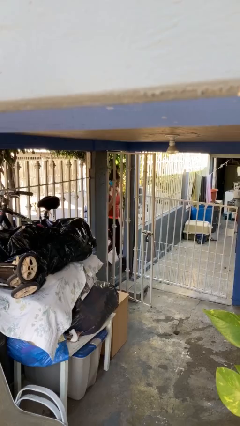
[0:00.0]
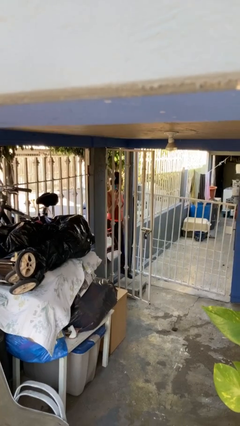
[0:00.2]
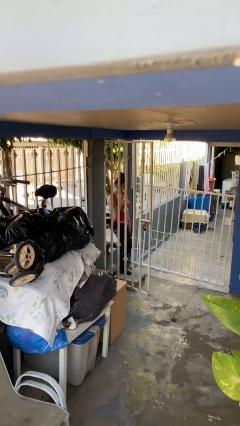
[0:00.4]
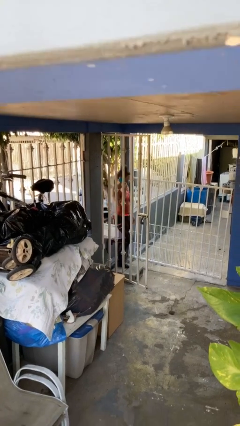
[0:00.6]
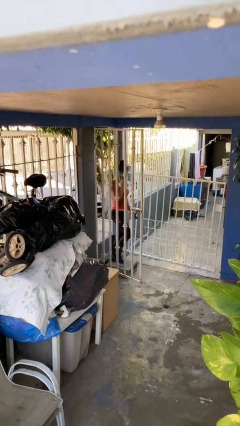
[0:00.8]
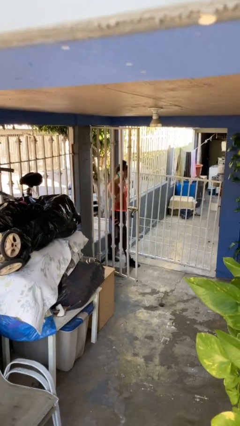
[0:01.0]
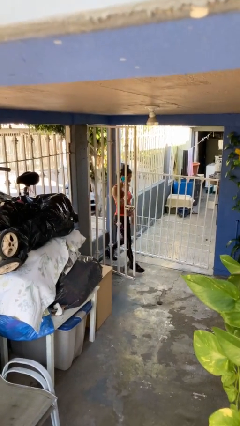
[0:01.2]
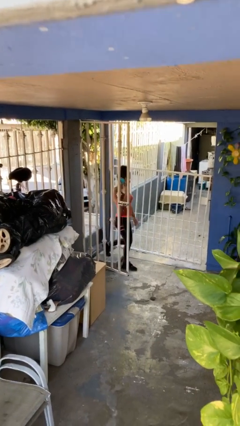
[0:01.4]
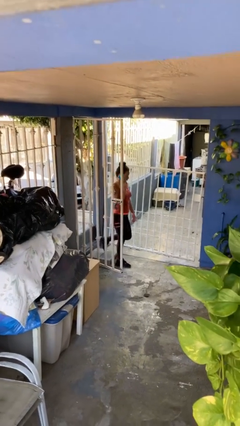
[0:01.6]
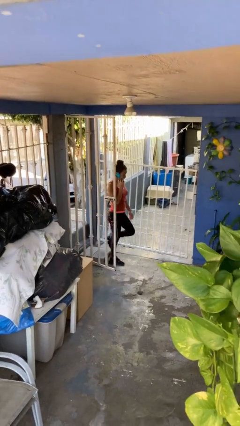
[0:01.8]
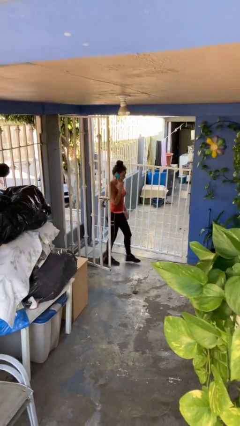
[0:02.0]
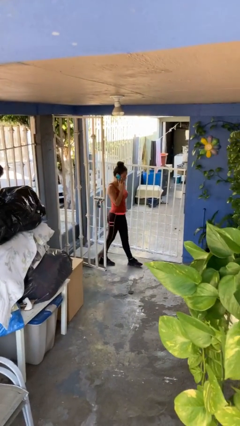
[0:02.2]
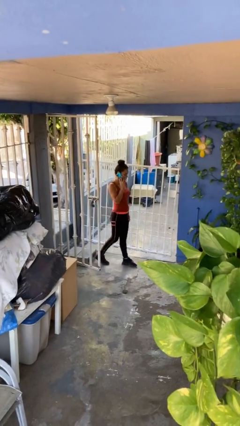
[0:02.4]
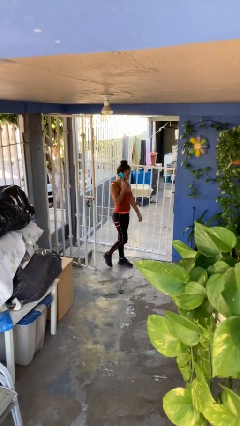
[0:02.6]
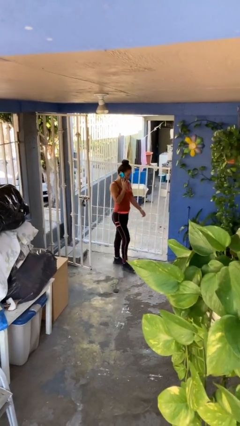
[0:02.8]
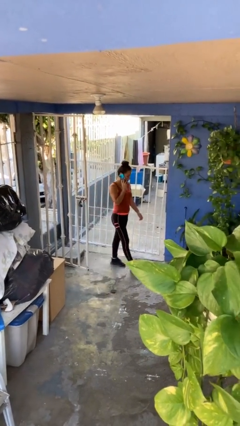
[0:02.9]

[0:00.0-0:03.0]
person enters scene through structure

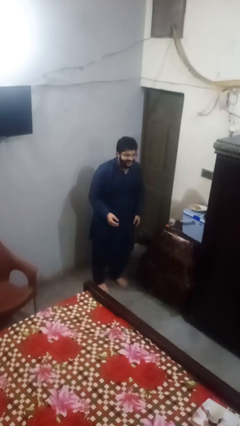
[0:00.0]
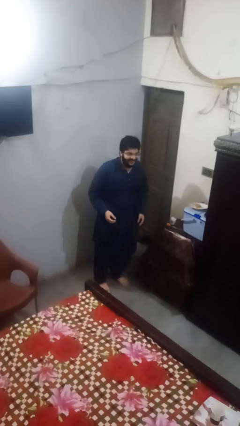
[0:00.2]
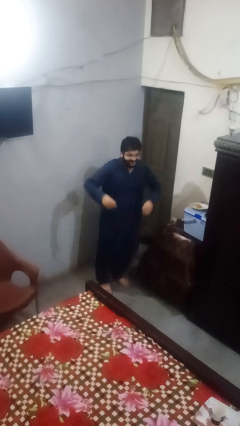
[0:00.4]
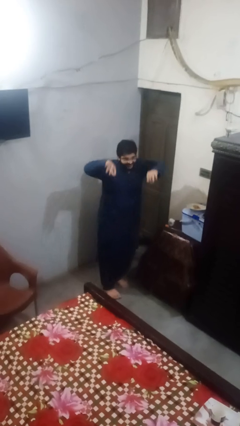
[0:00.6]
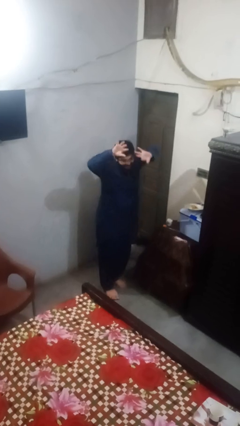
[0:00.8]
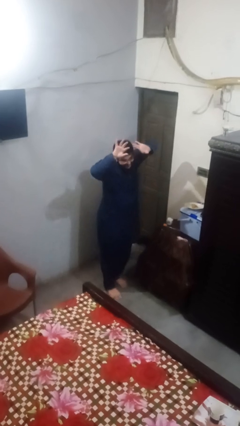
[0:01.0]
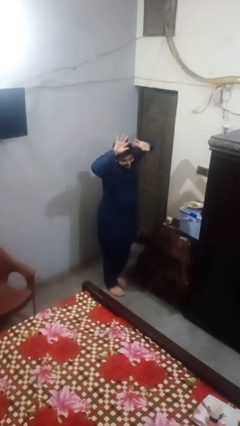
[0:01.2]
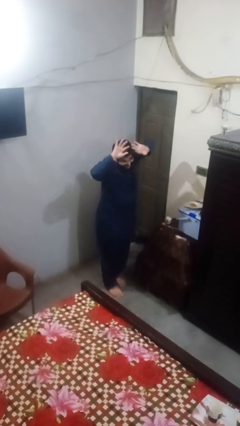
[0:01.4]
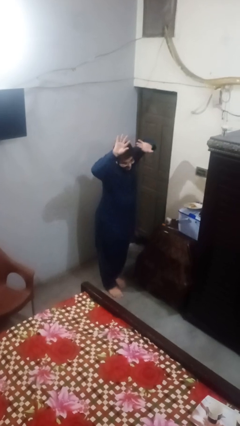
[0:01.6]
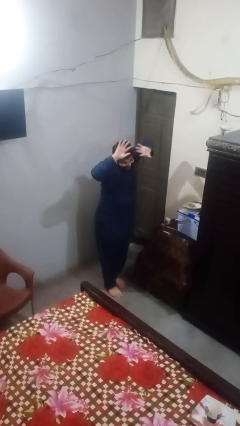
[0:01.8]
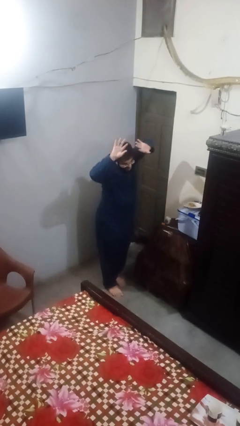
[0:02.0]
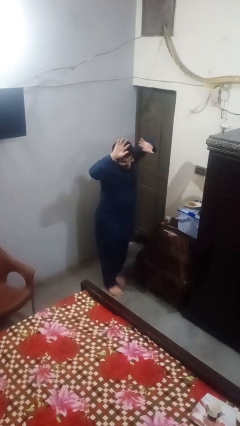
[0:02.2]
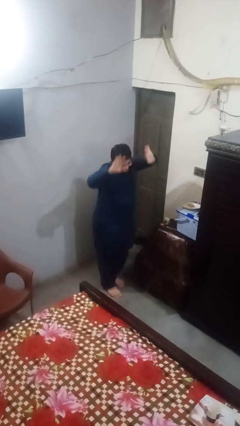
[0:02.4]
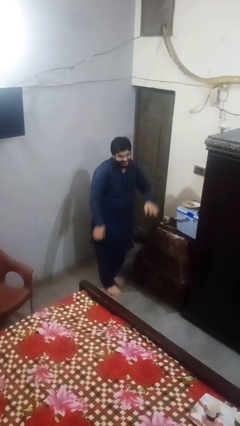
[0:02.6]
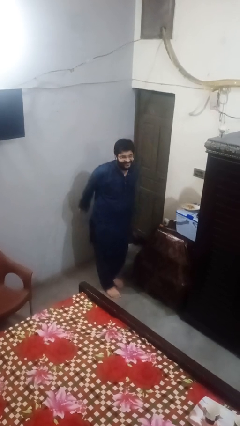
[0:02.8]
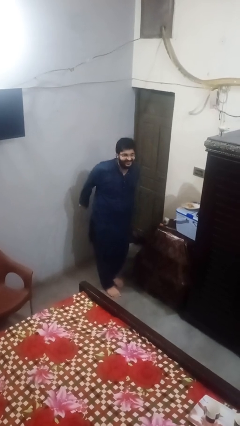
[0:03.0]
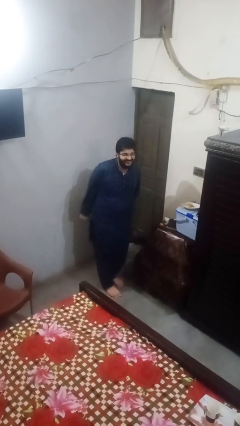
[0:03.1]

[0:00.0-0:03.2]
person dances in place

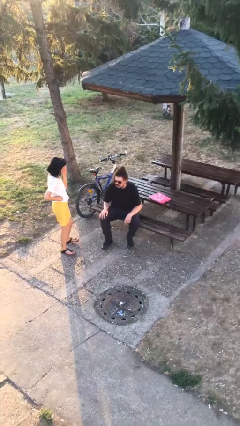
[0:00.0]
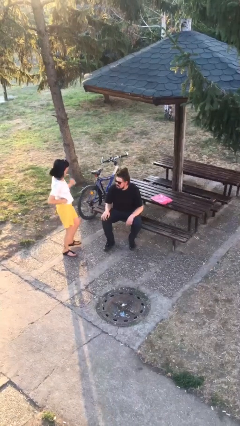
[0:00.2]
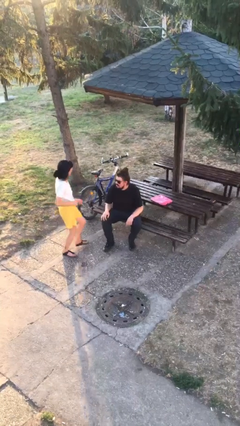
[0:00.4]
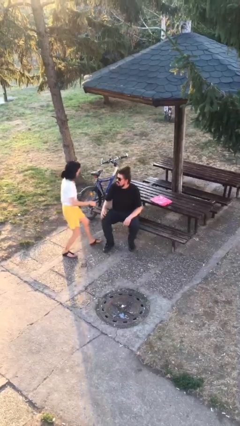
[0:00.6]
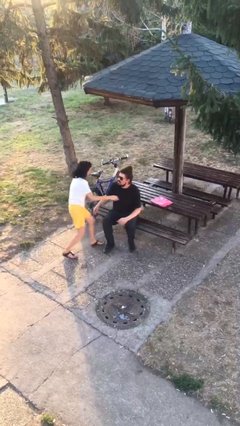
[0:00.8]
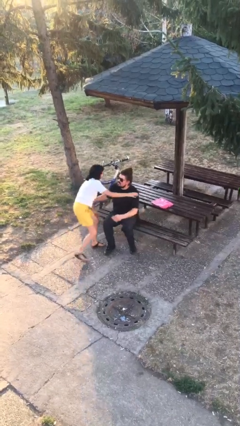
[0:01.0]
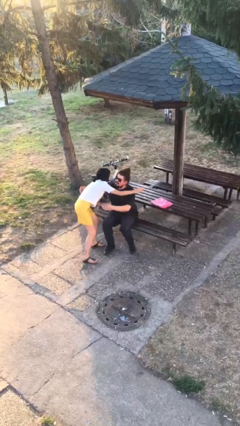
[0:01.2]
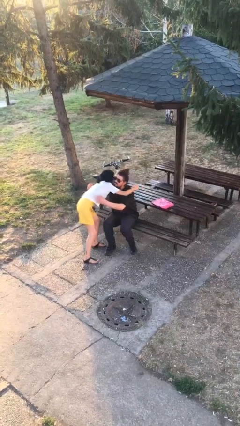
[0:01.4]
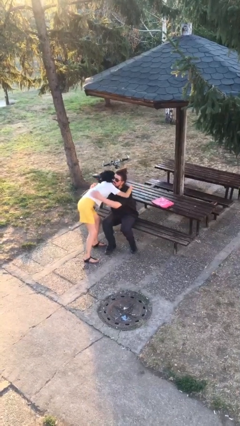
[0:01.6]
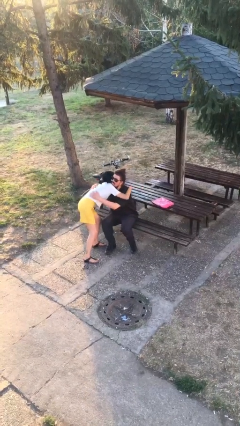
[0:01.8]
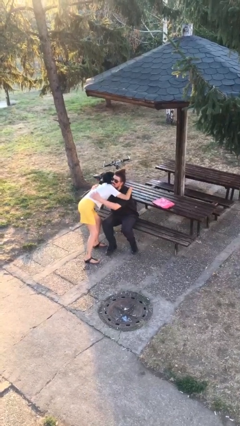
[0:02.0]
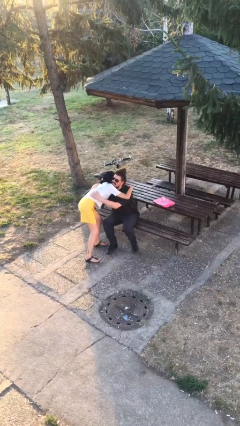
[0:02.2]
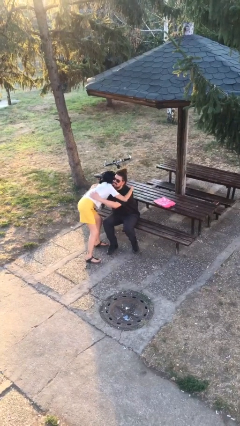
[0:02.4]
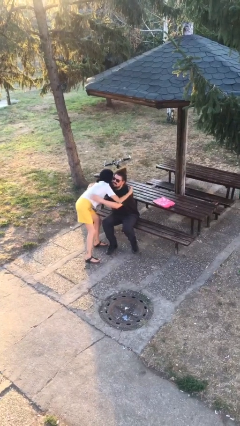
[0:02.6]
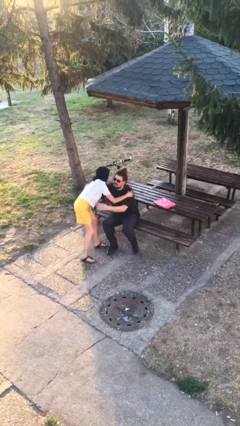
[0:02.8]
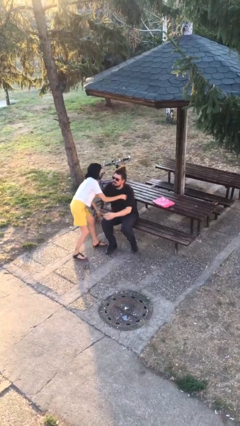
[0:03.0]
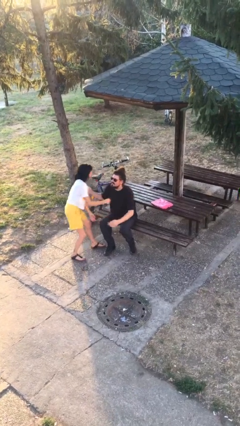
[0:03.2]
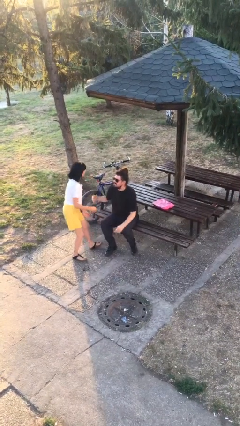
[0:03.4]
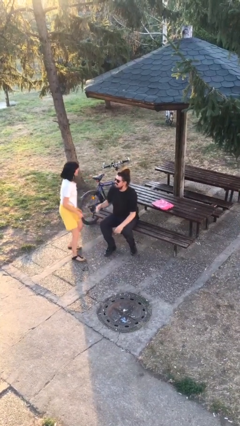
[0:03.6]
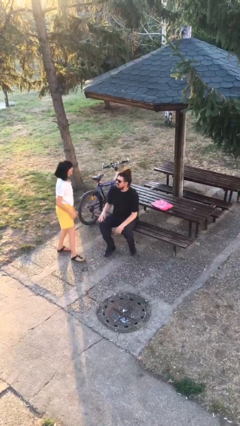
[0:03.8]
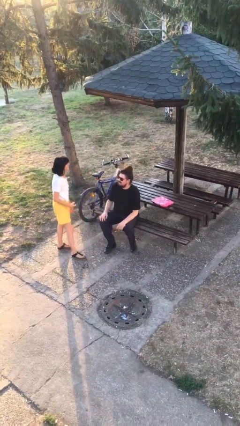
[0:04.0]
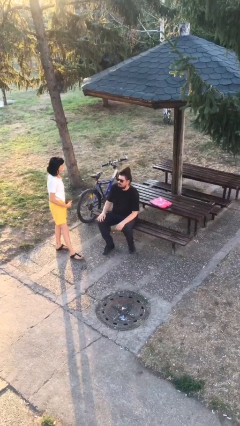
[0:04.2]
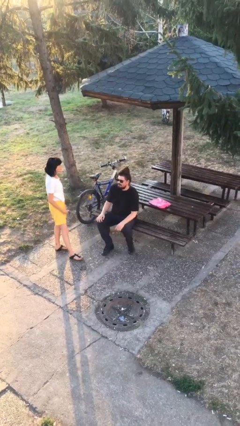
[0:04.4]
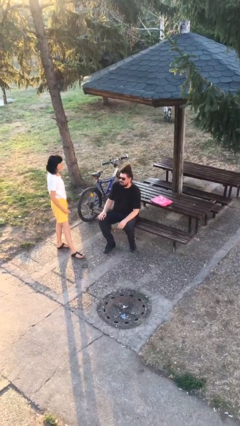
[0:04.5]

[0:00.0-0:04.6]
person embraces person

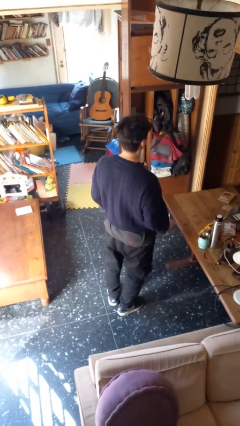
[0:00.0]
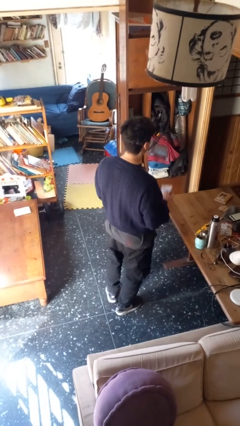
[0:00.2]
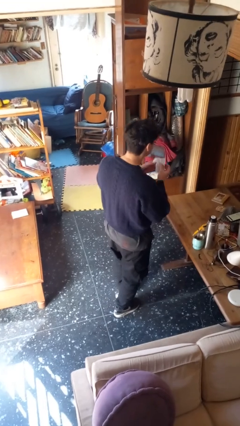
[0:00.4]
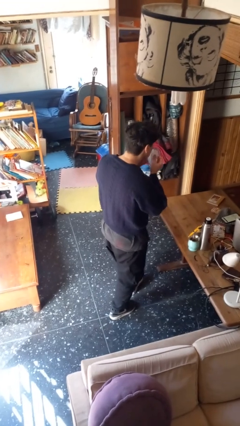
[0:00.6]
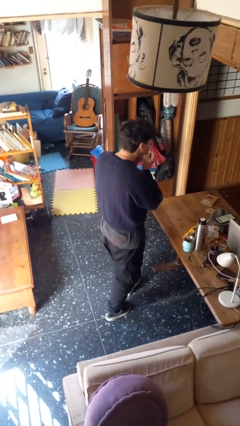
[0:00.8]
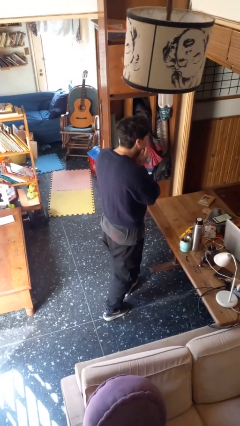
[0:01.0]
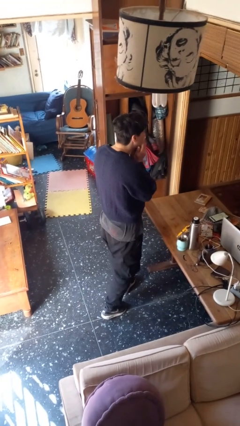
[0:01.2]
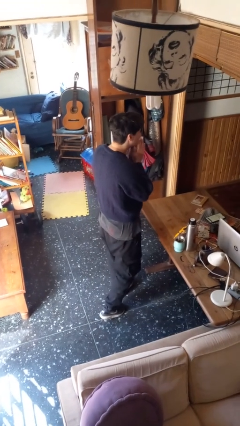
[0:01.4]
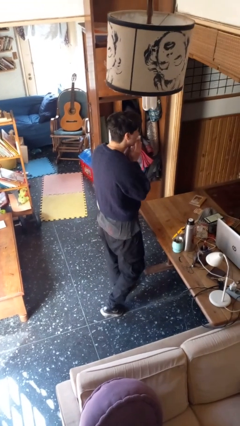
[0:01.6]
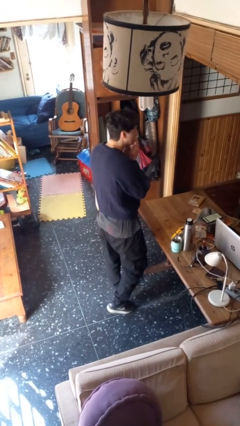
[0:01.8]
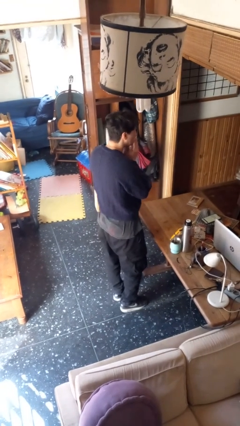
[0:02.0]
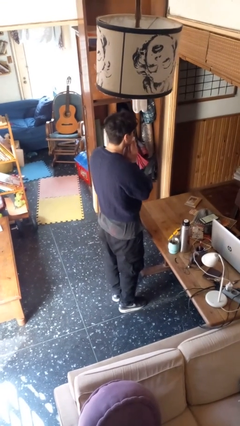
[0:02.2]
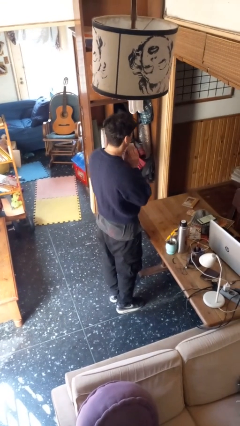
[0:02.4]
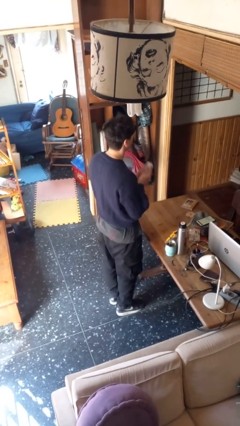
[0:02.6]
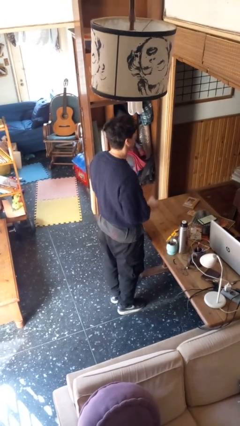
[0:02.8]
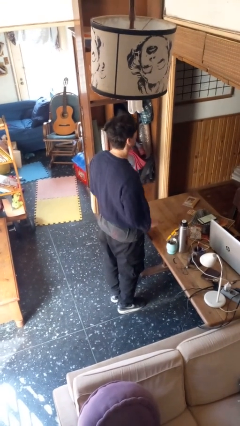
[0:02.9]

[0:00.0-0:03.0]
person wipes mouth with napkin

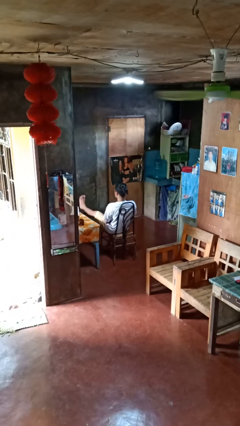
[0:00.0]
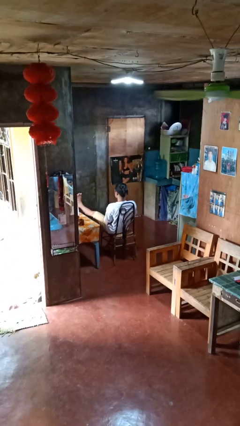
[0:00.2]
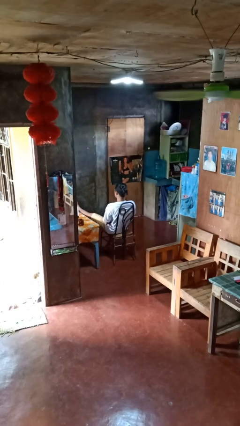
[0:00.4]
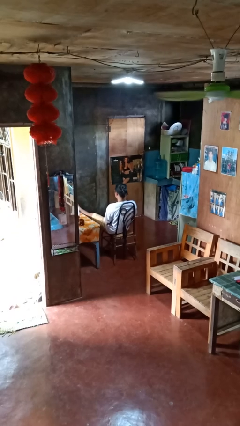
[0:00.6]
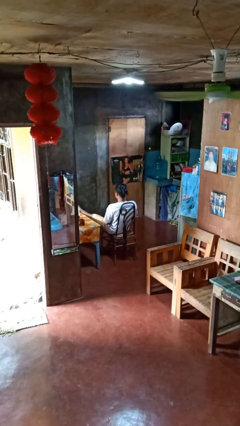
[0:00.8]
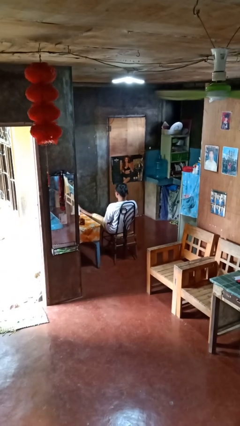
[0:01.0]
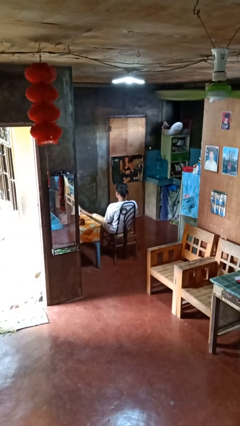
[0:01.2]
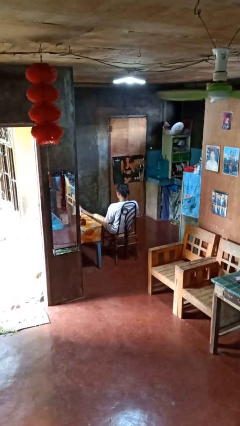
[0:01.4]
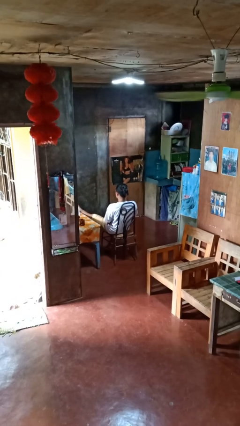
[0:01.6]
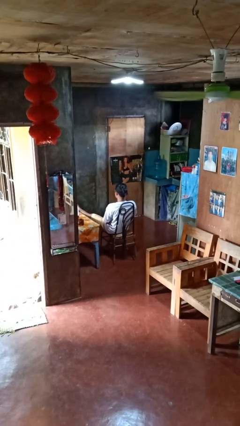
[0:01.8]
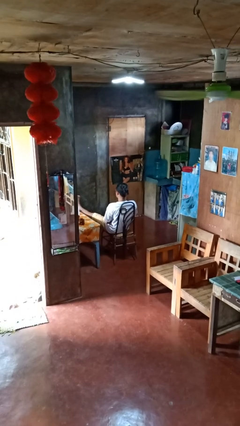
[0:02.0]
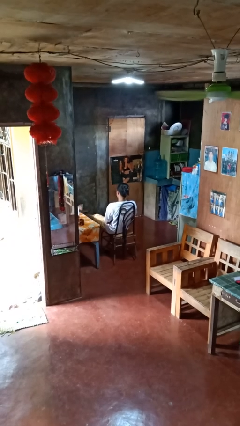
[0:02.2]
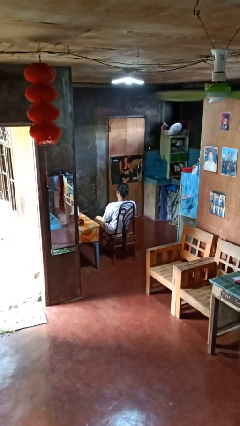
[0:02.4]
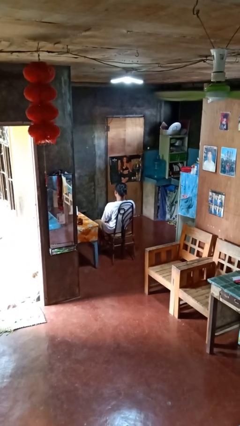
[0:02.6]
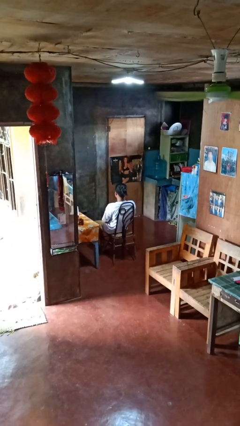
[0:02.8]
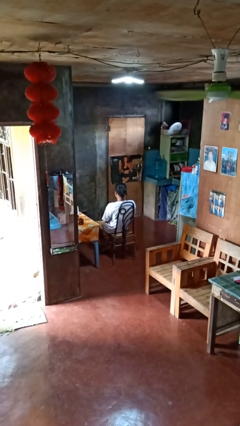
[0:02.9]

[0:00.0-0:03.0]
person puts feet up

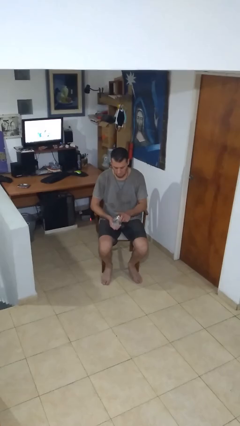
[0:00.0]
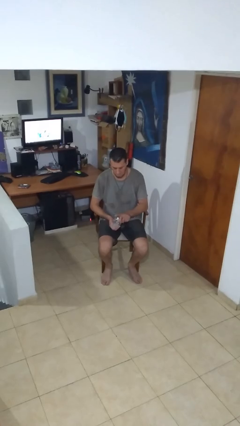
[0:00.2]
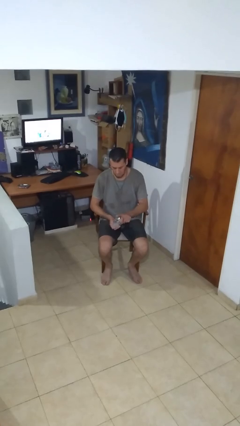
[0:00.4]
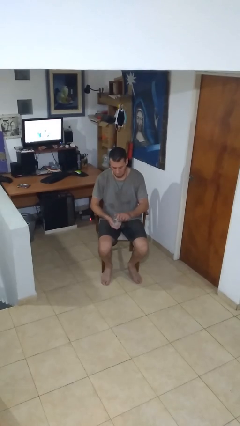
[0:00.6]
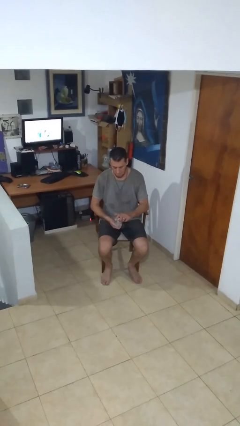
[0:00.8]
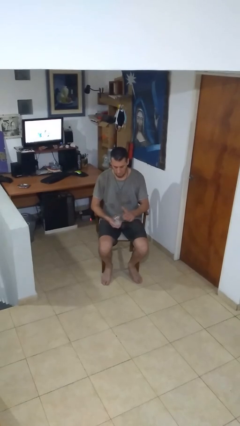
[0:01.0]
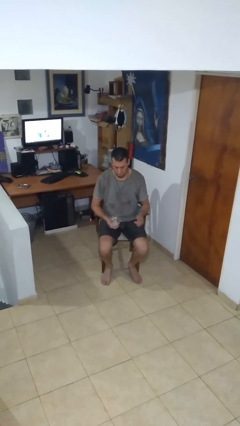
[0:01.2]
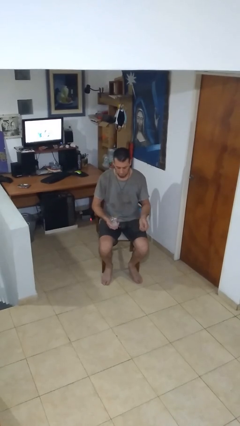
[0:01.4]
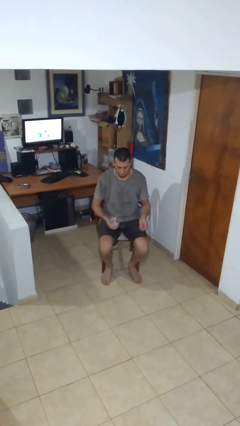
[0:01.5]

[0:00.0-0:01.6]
person closes jar
